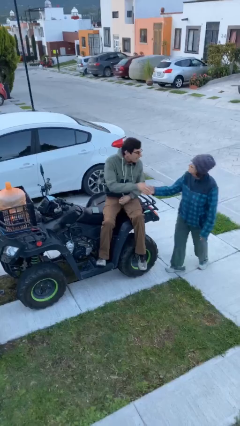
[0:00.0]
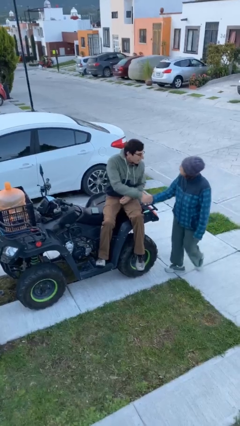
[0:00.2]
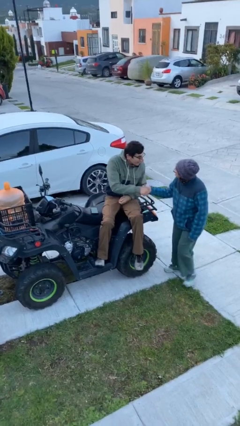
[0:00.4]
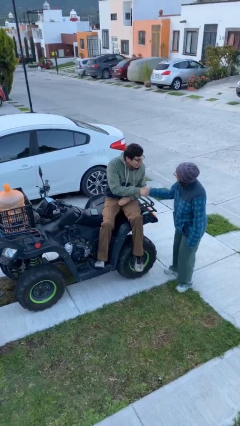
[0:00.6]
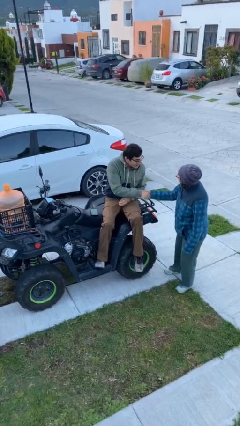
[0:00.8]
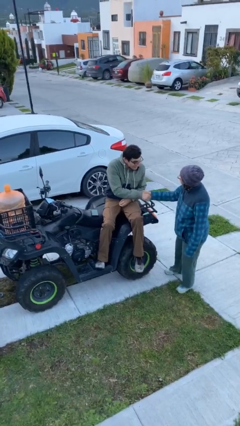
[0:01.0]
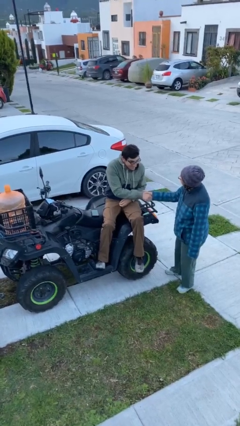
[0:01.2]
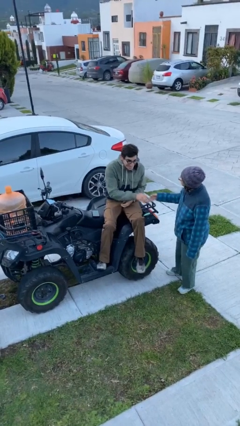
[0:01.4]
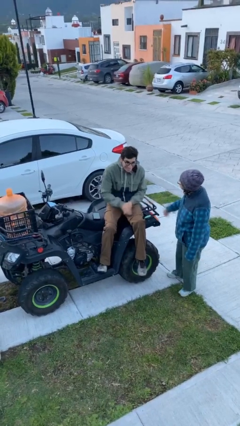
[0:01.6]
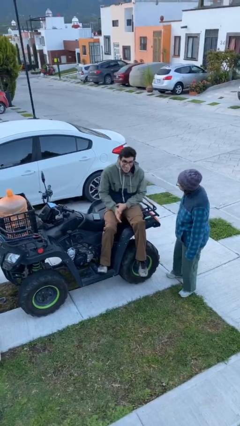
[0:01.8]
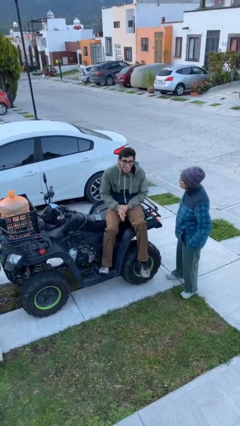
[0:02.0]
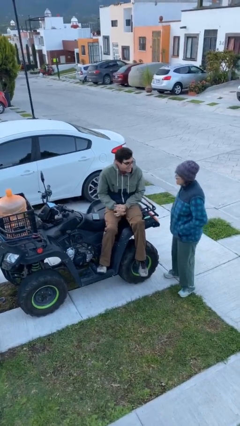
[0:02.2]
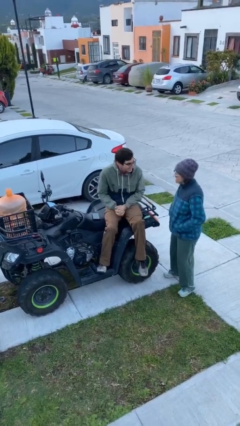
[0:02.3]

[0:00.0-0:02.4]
person shakes hand

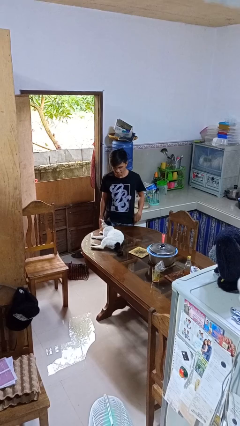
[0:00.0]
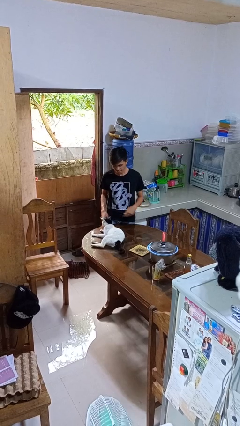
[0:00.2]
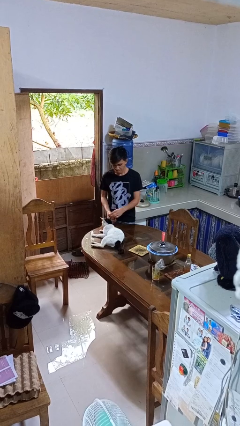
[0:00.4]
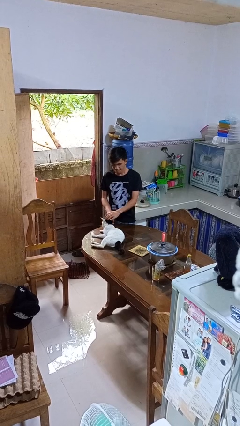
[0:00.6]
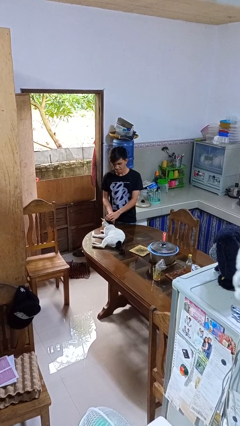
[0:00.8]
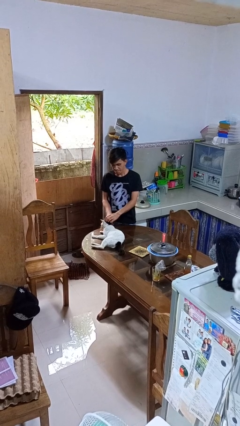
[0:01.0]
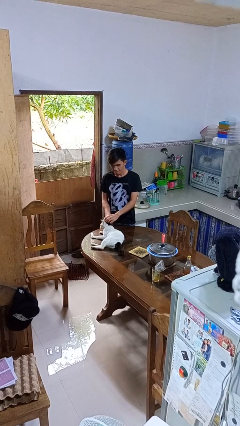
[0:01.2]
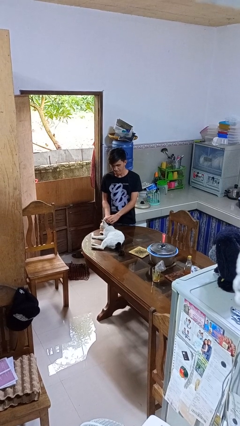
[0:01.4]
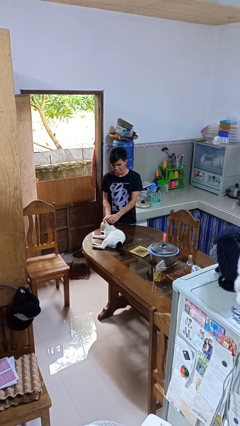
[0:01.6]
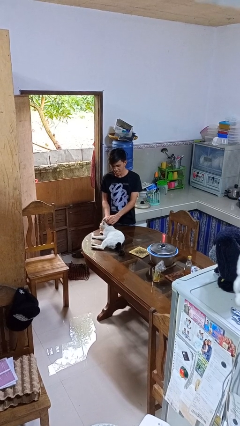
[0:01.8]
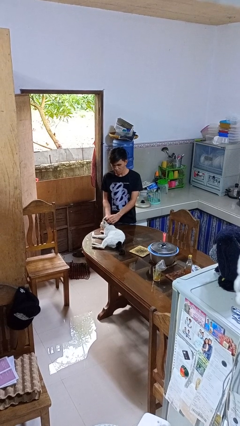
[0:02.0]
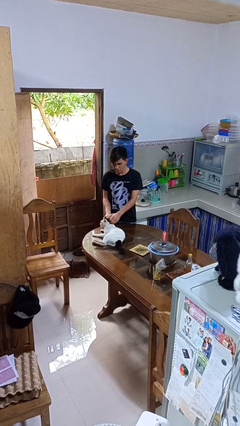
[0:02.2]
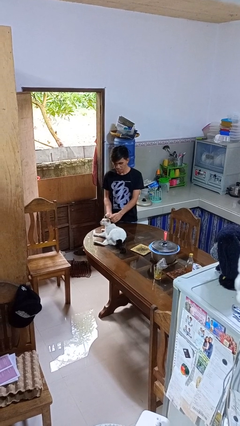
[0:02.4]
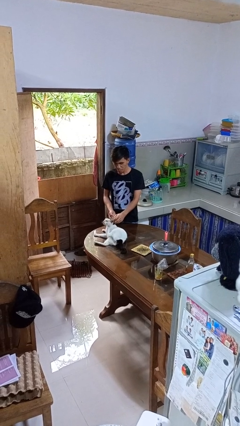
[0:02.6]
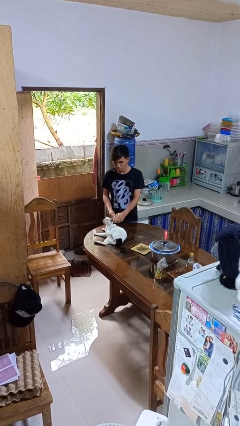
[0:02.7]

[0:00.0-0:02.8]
person pets cat

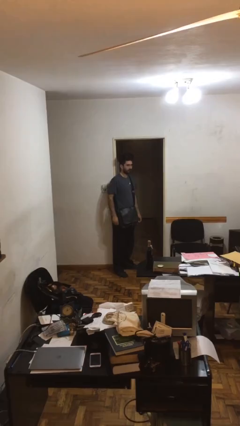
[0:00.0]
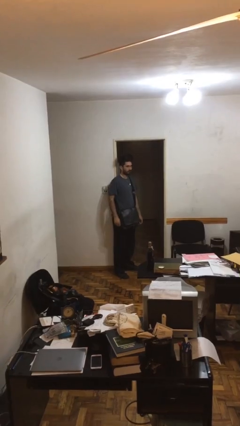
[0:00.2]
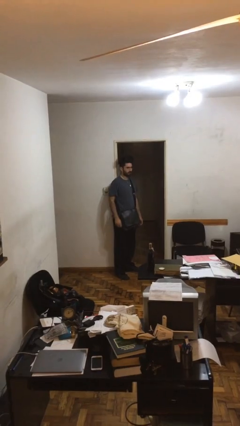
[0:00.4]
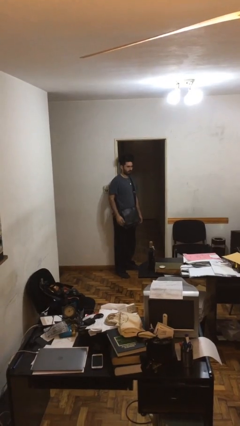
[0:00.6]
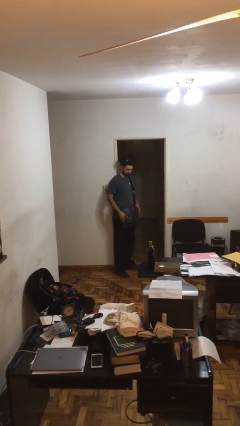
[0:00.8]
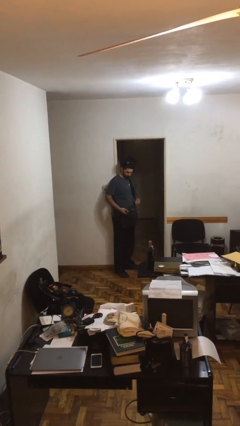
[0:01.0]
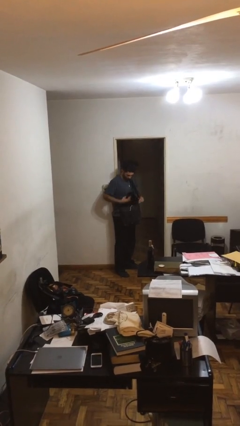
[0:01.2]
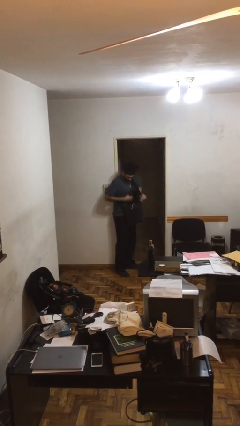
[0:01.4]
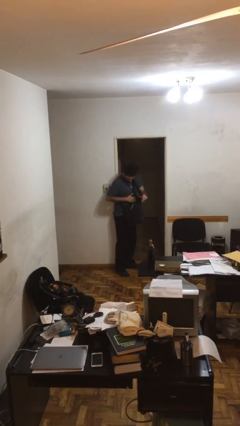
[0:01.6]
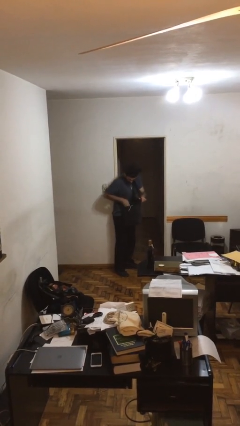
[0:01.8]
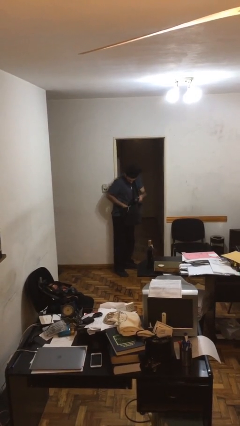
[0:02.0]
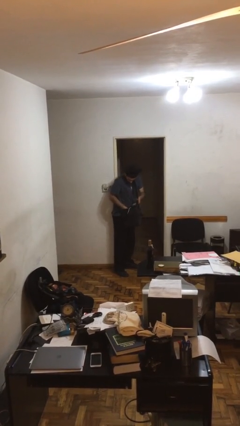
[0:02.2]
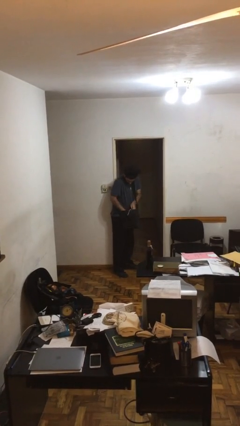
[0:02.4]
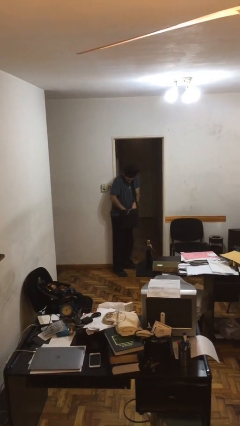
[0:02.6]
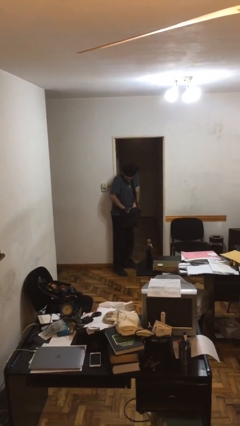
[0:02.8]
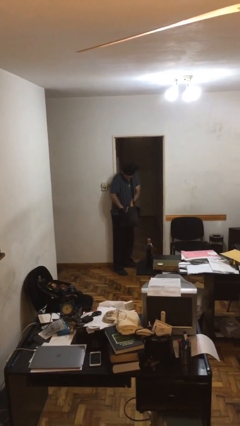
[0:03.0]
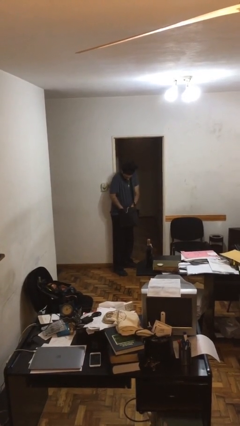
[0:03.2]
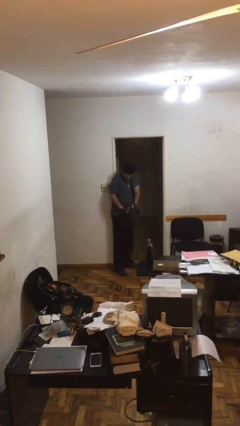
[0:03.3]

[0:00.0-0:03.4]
person searches in purse

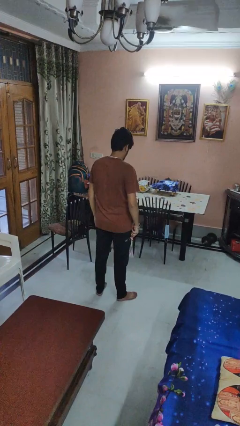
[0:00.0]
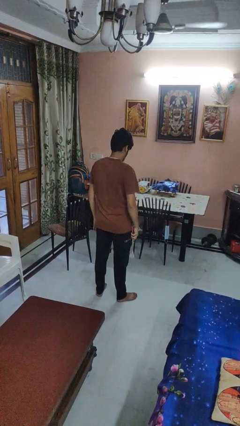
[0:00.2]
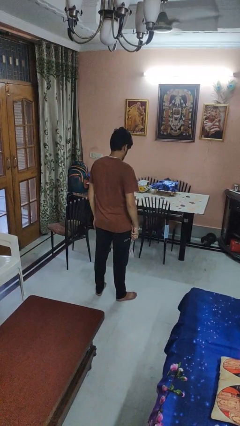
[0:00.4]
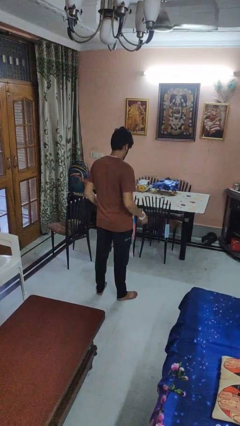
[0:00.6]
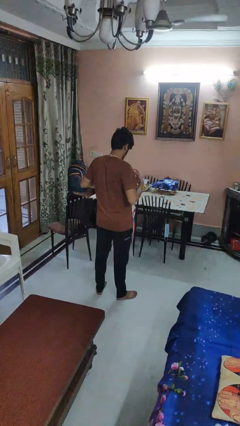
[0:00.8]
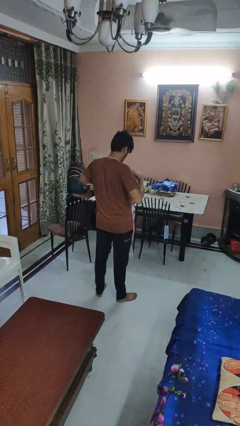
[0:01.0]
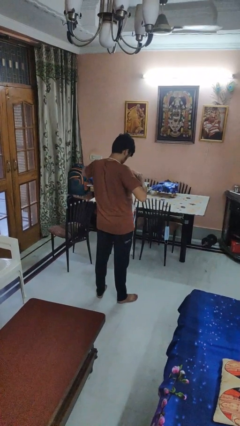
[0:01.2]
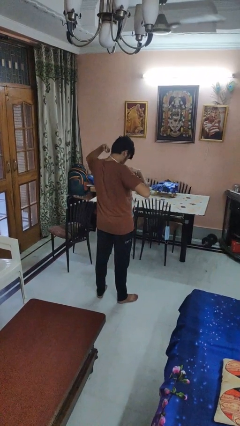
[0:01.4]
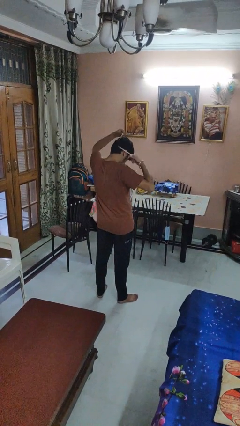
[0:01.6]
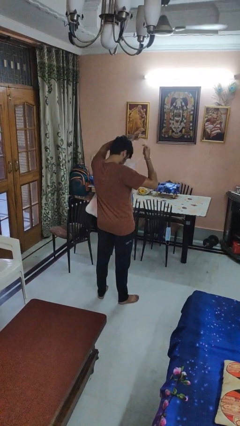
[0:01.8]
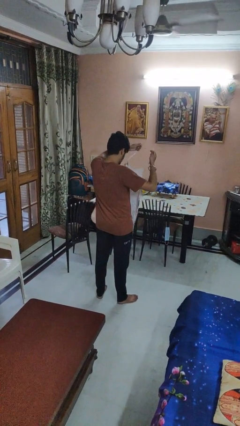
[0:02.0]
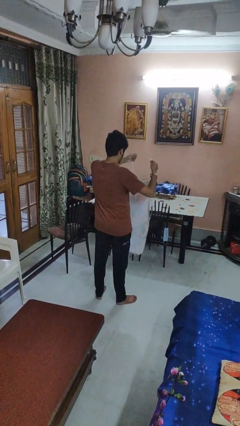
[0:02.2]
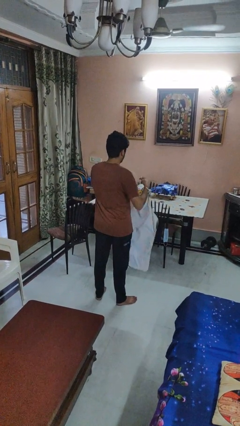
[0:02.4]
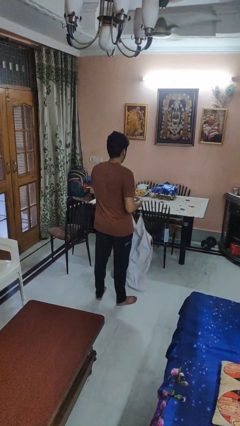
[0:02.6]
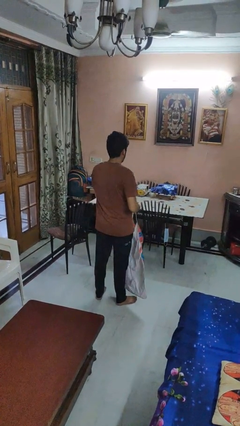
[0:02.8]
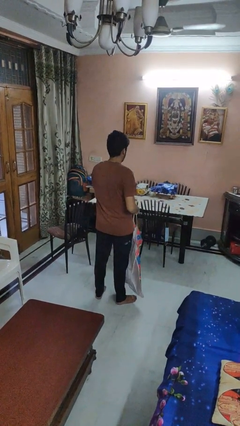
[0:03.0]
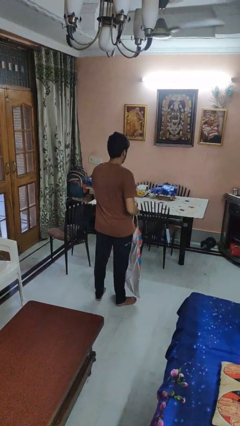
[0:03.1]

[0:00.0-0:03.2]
person takes off apron

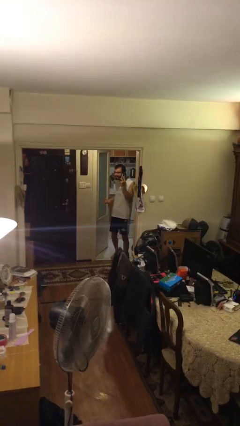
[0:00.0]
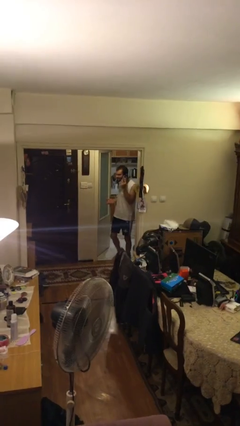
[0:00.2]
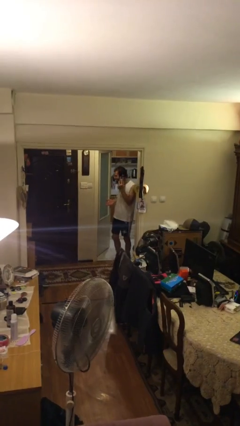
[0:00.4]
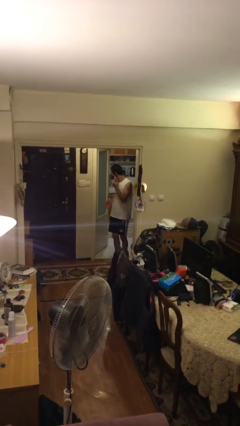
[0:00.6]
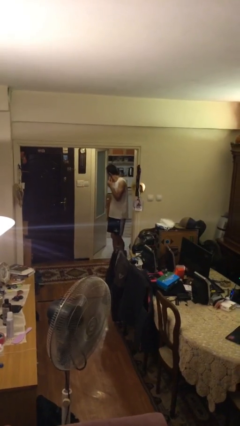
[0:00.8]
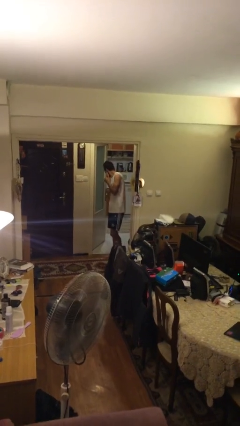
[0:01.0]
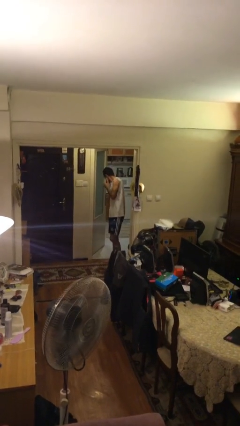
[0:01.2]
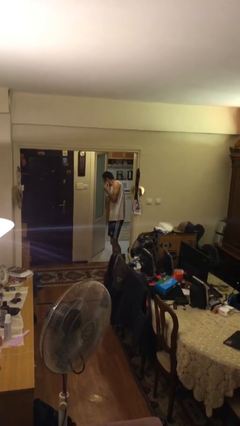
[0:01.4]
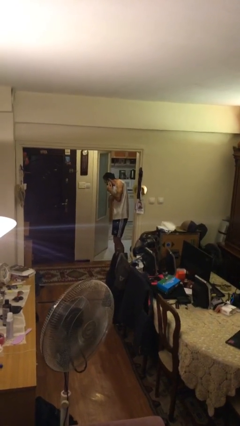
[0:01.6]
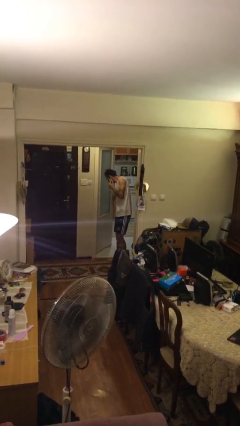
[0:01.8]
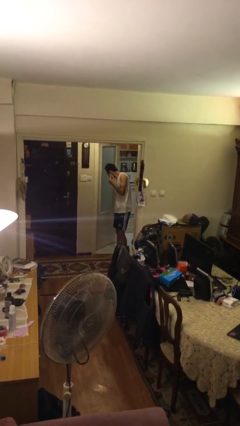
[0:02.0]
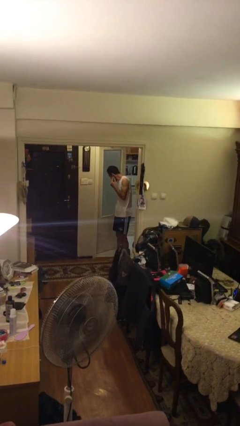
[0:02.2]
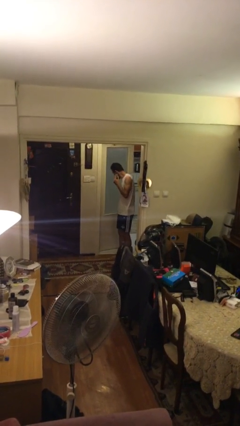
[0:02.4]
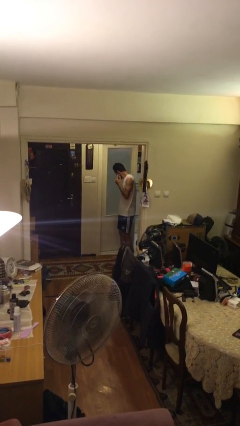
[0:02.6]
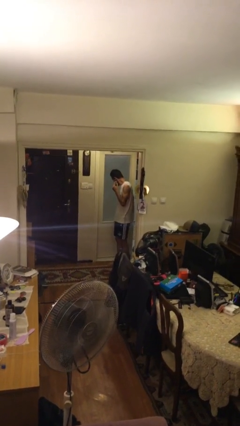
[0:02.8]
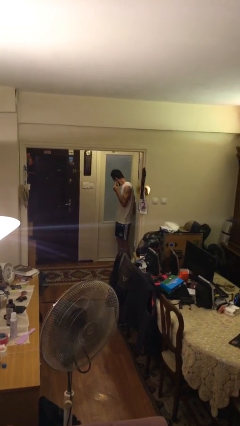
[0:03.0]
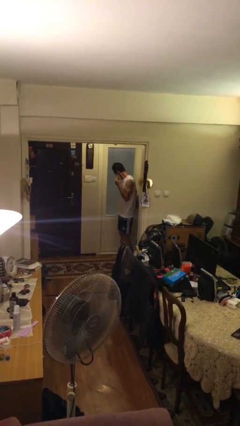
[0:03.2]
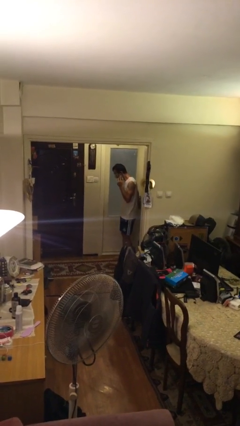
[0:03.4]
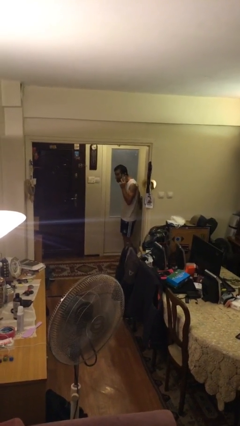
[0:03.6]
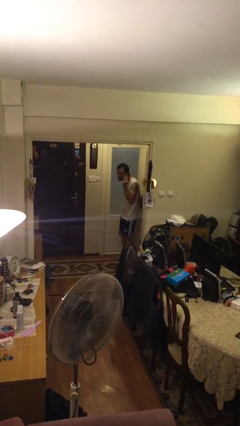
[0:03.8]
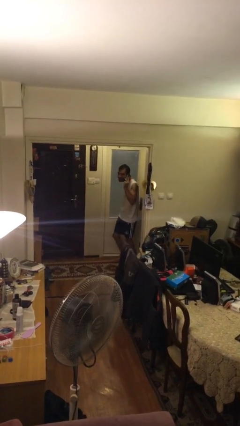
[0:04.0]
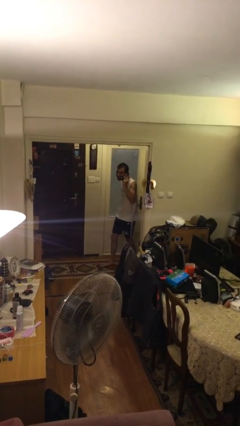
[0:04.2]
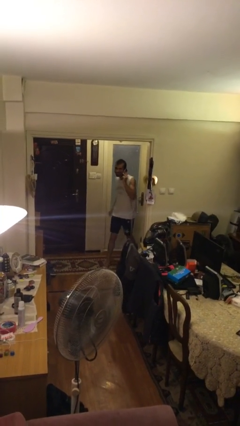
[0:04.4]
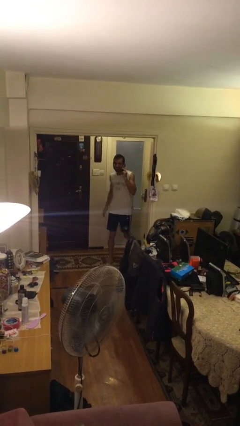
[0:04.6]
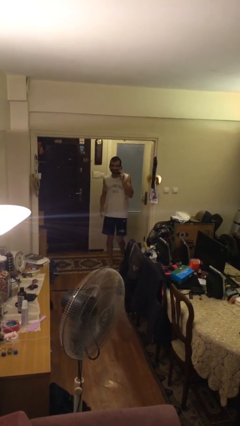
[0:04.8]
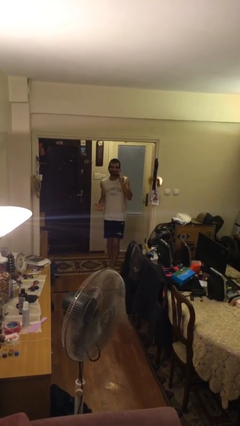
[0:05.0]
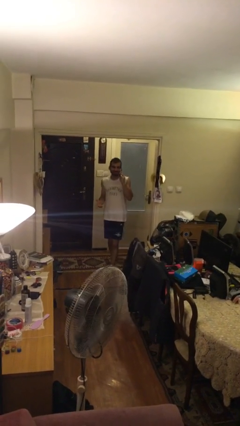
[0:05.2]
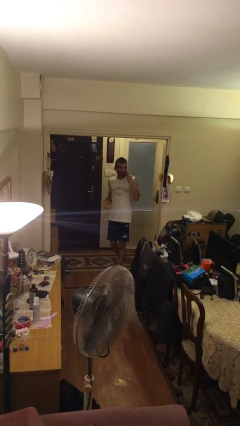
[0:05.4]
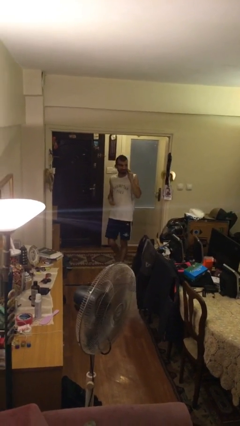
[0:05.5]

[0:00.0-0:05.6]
person closes facility door
